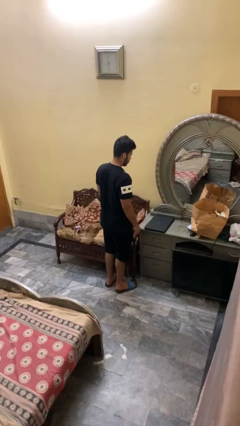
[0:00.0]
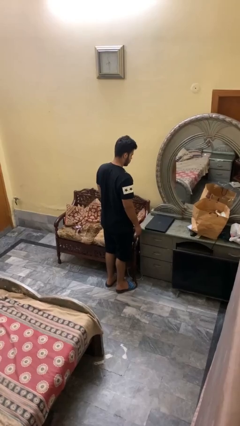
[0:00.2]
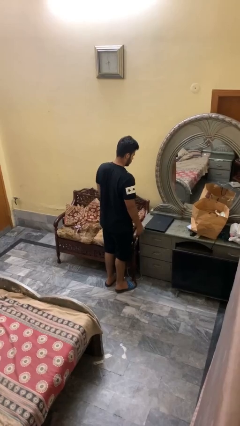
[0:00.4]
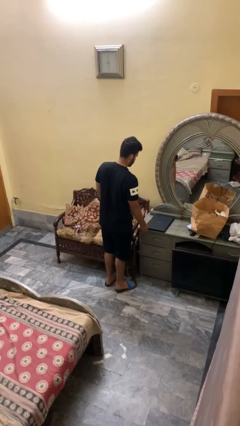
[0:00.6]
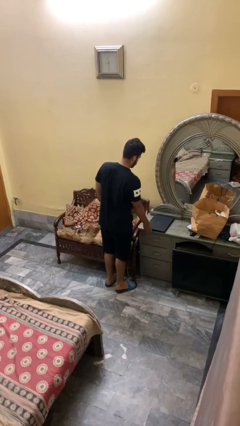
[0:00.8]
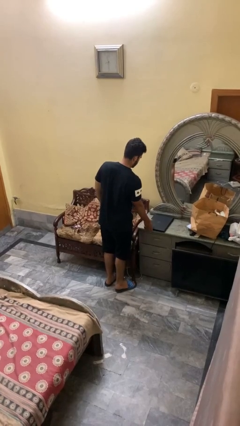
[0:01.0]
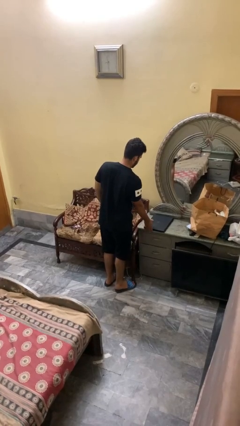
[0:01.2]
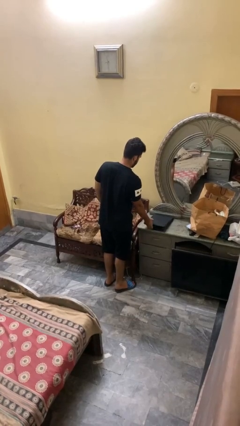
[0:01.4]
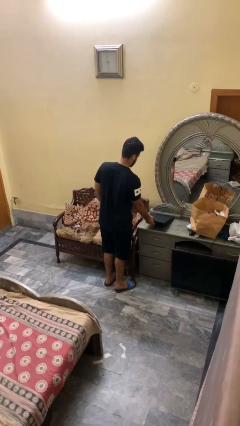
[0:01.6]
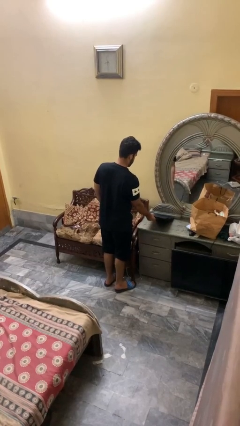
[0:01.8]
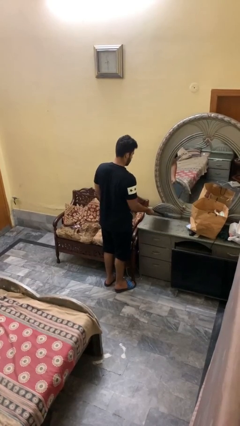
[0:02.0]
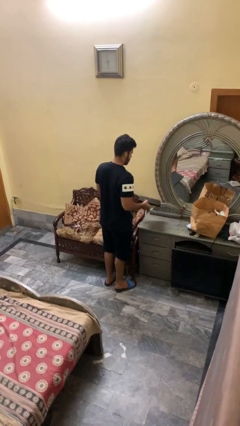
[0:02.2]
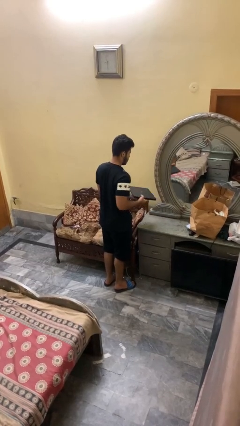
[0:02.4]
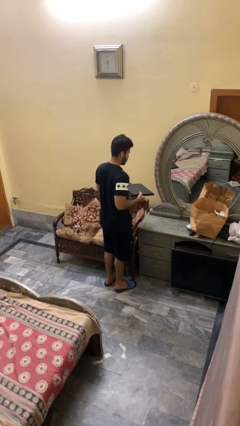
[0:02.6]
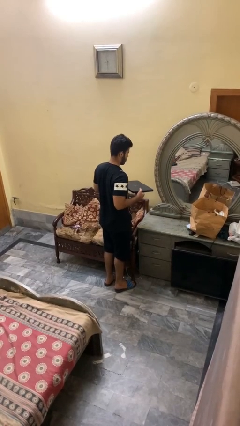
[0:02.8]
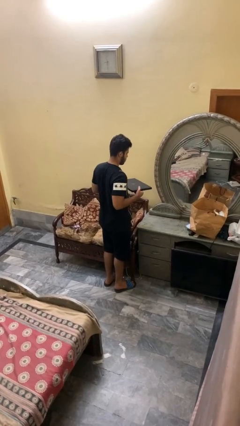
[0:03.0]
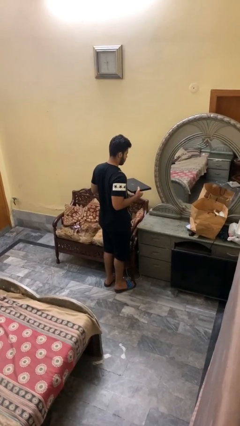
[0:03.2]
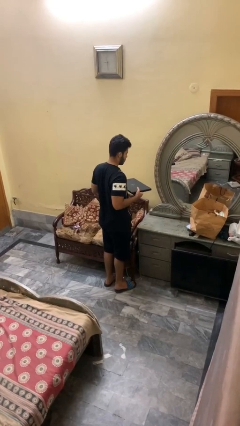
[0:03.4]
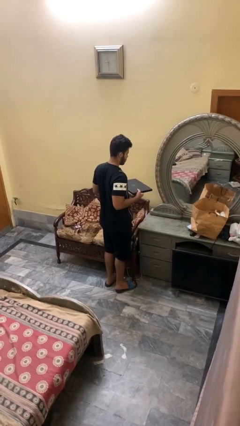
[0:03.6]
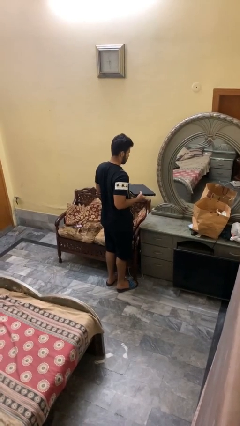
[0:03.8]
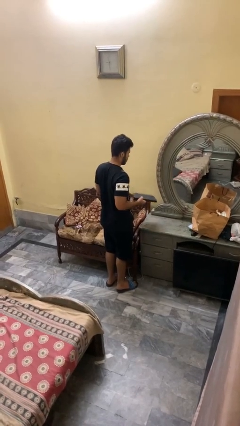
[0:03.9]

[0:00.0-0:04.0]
person picks up object from countertop

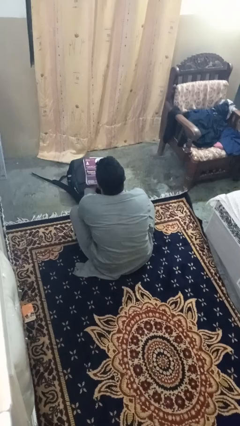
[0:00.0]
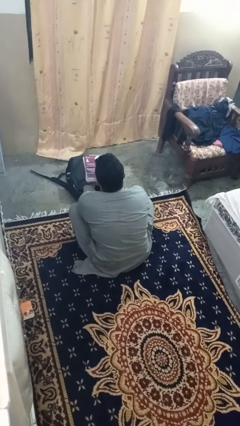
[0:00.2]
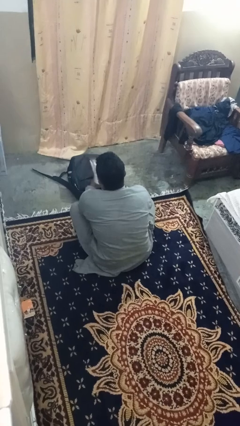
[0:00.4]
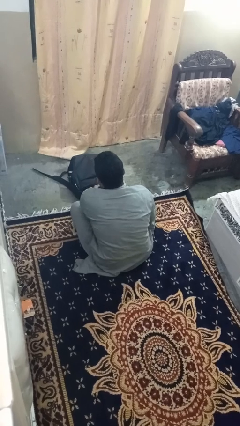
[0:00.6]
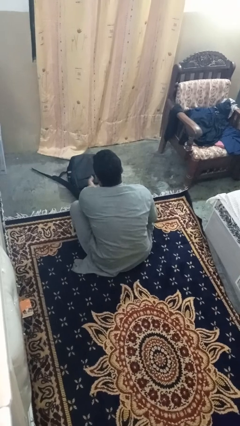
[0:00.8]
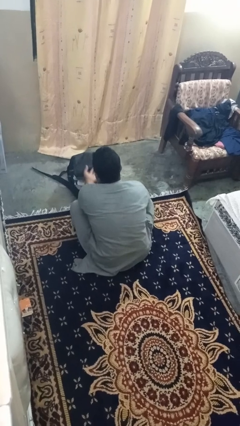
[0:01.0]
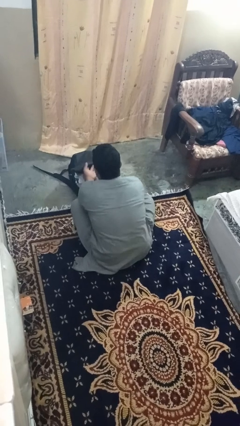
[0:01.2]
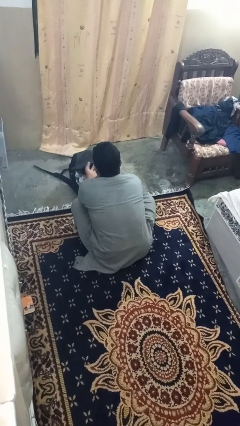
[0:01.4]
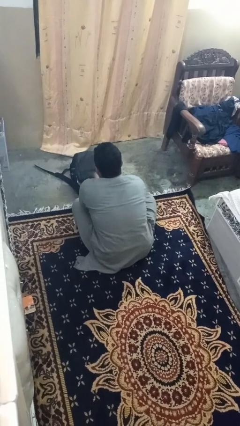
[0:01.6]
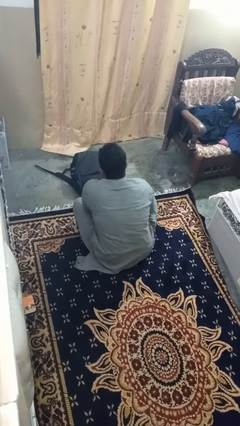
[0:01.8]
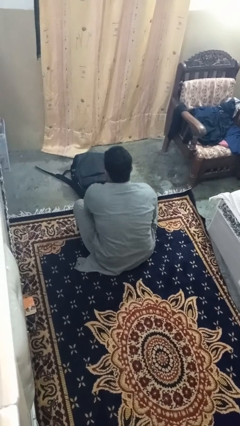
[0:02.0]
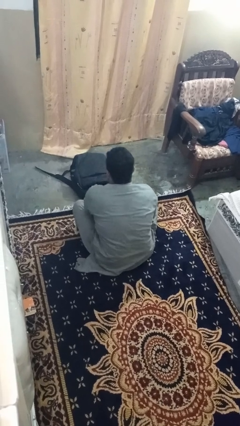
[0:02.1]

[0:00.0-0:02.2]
person puts object into bag

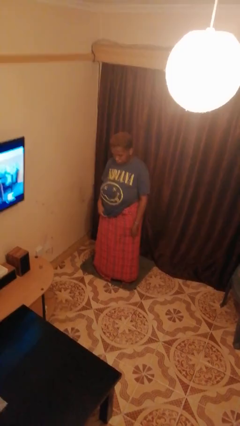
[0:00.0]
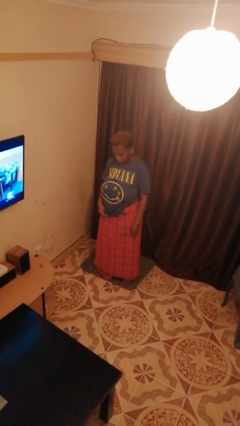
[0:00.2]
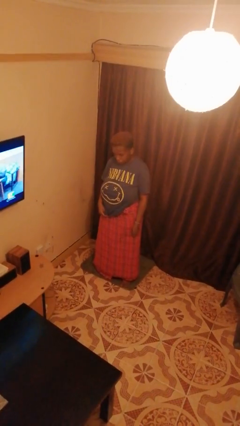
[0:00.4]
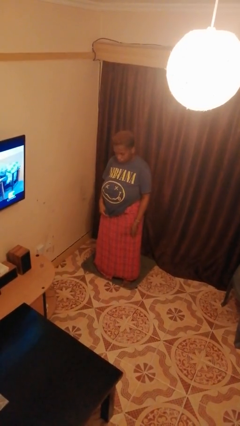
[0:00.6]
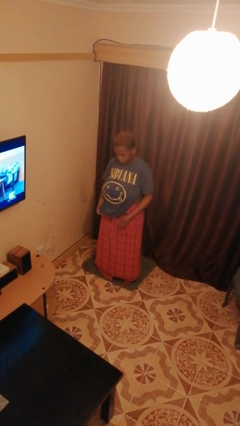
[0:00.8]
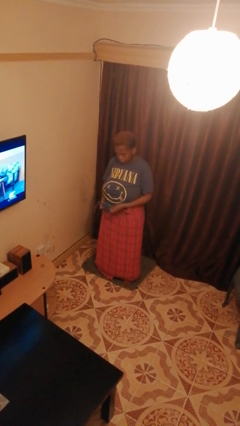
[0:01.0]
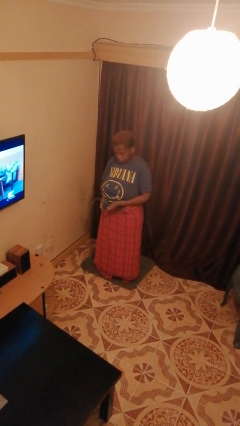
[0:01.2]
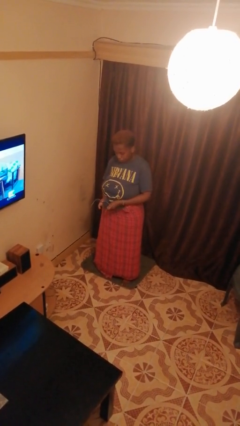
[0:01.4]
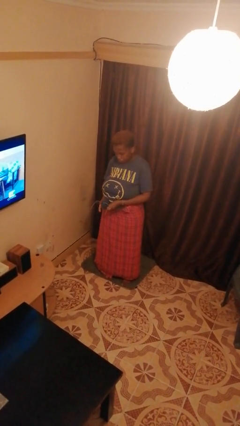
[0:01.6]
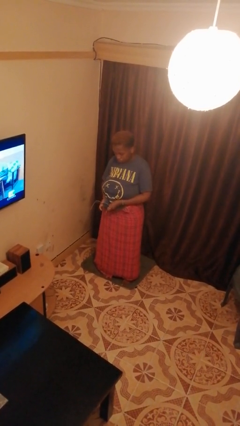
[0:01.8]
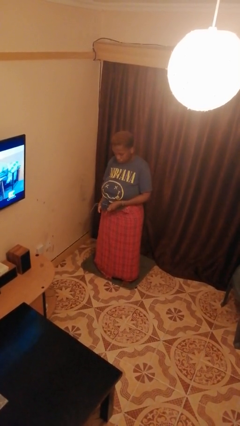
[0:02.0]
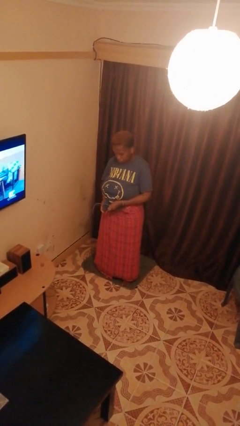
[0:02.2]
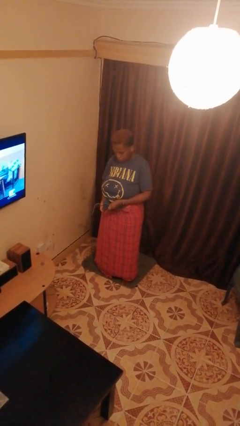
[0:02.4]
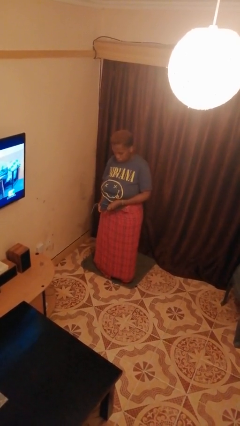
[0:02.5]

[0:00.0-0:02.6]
person cleans eyeglasses

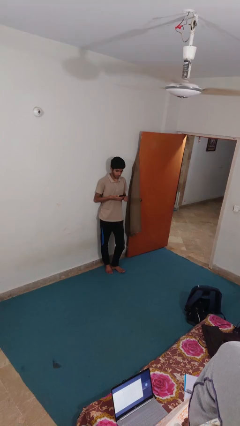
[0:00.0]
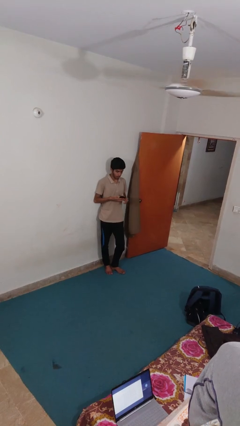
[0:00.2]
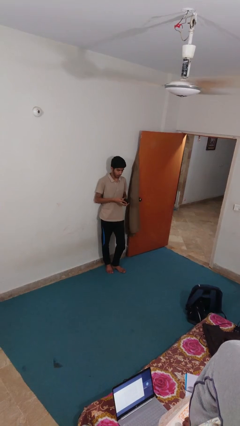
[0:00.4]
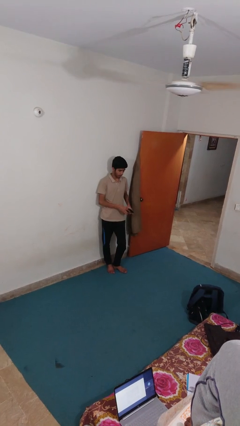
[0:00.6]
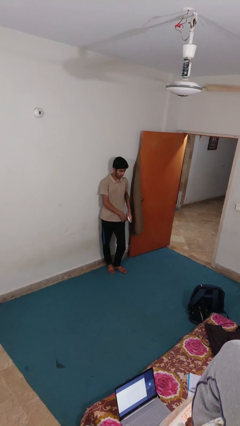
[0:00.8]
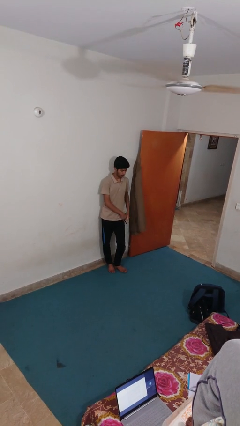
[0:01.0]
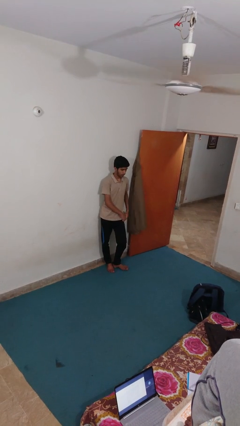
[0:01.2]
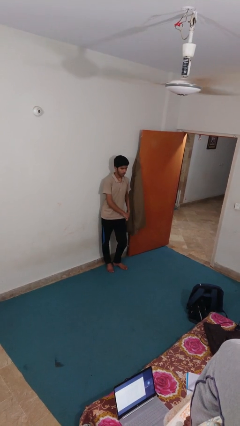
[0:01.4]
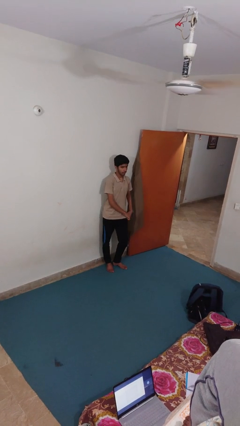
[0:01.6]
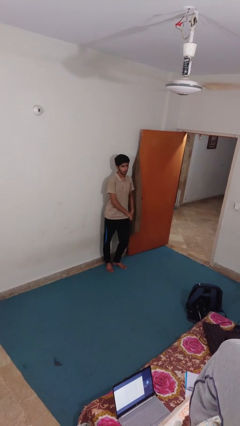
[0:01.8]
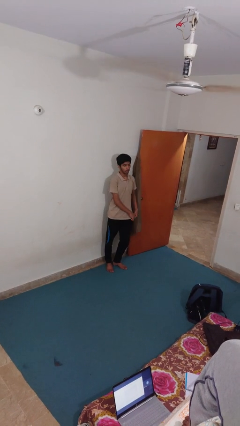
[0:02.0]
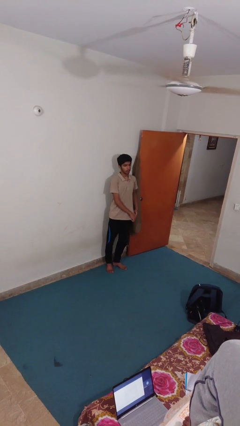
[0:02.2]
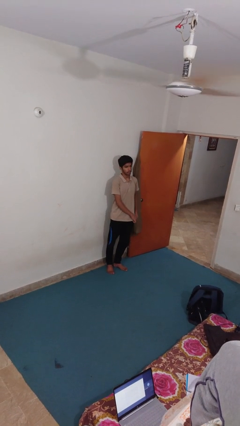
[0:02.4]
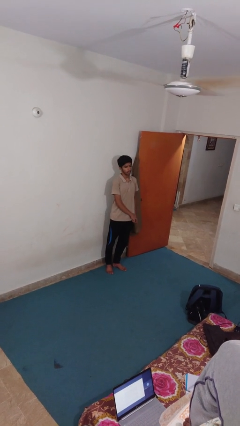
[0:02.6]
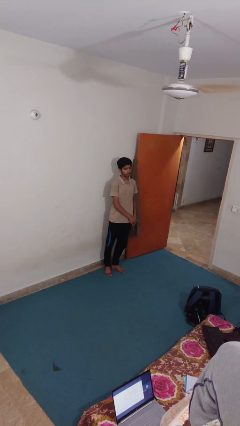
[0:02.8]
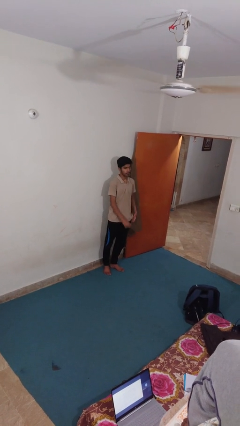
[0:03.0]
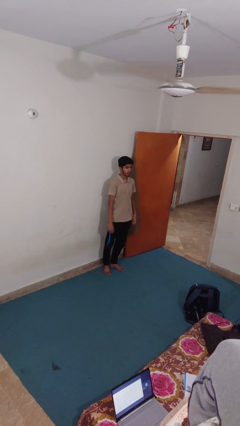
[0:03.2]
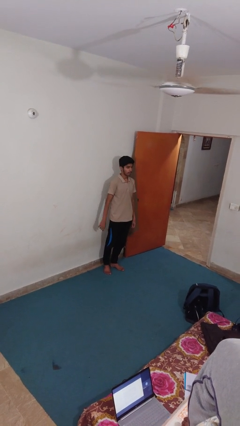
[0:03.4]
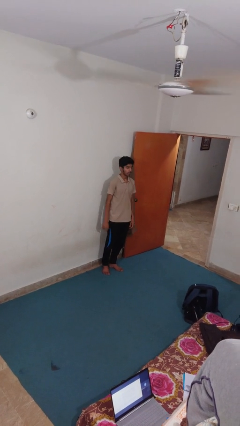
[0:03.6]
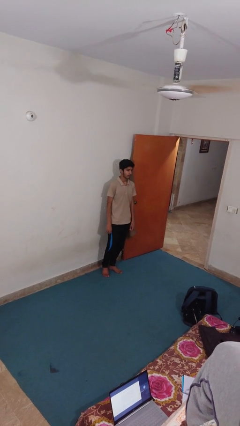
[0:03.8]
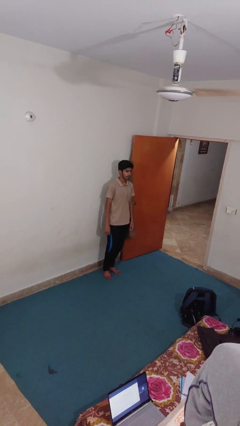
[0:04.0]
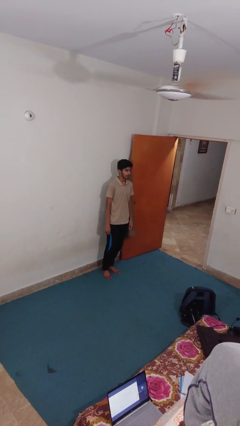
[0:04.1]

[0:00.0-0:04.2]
person puts phone into pocket

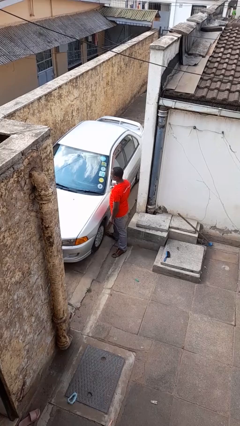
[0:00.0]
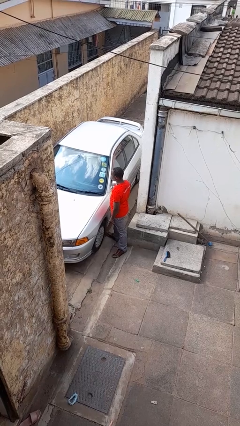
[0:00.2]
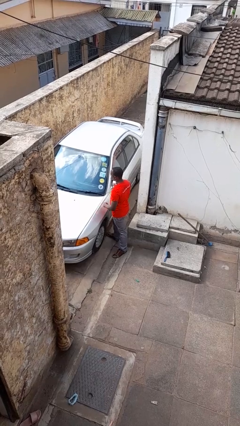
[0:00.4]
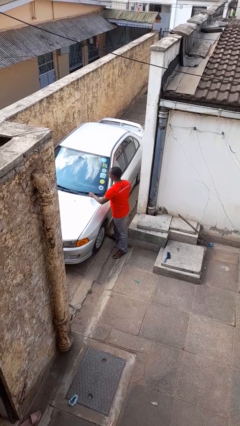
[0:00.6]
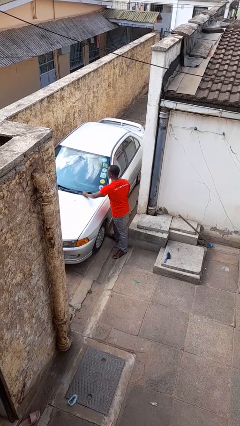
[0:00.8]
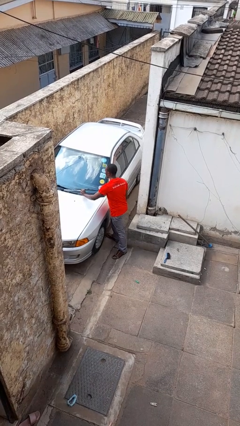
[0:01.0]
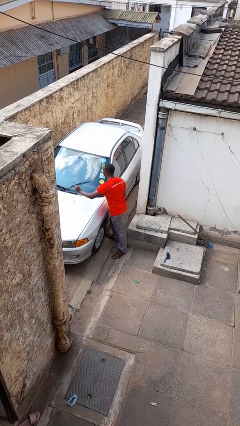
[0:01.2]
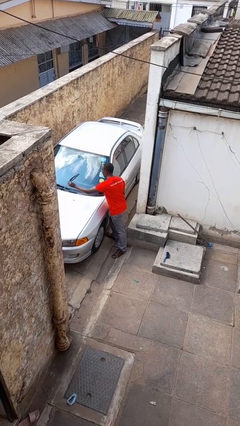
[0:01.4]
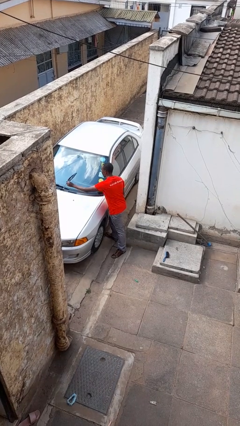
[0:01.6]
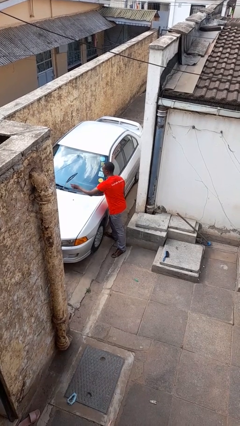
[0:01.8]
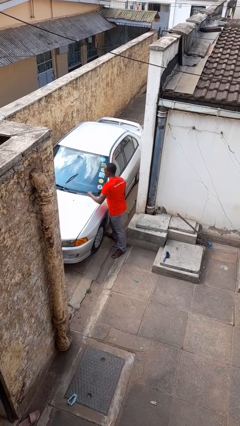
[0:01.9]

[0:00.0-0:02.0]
person flips up car wipers

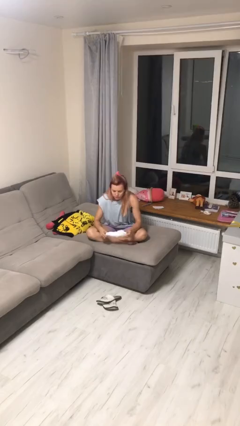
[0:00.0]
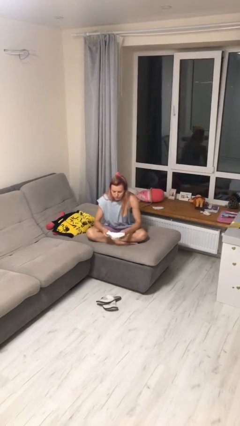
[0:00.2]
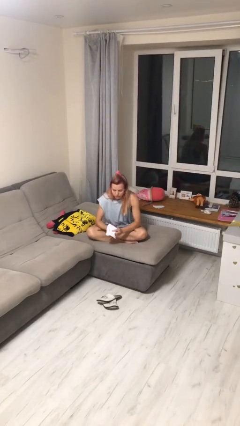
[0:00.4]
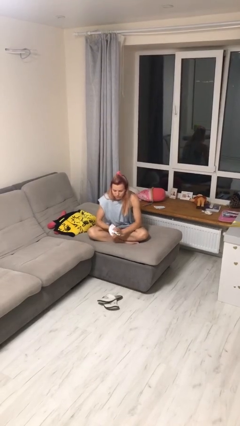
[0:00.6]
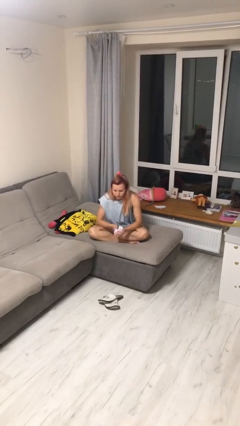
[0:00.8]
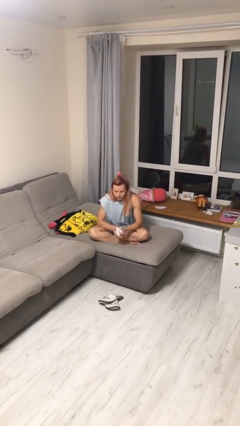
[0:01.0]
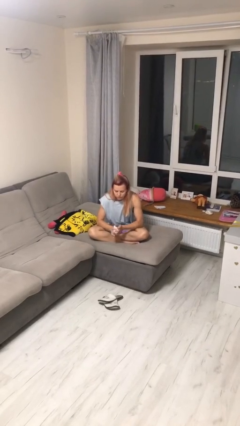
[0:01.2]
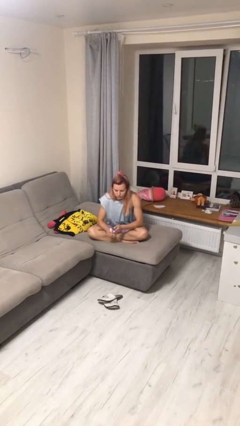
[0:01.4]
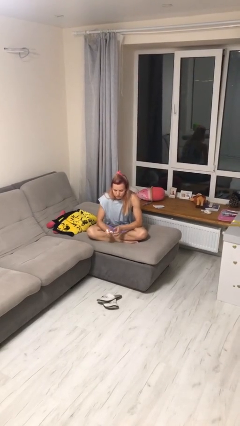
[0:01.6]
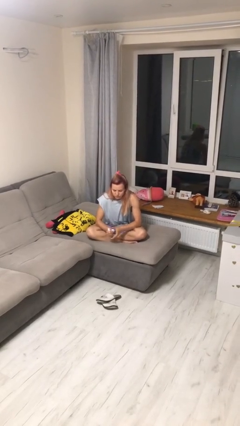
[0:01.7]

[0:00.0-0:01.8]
person crumples paper

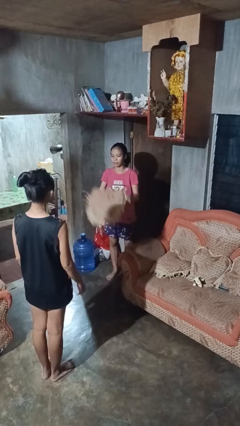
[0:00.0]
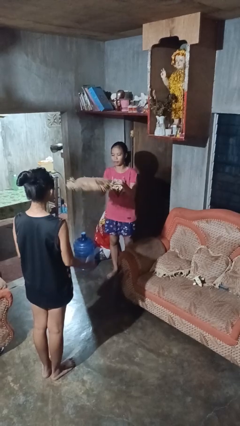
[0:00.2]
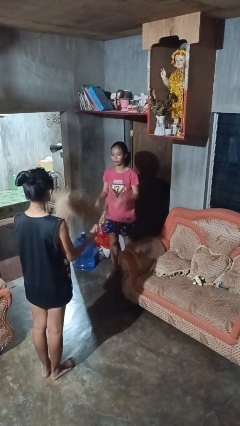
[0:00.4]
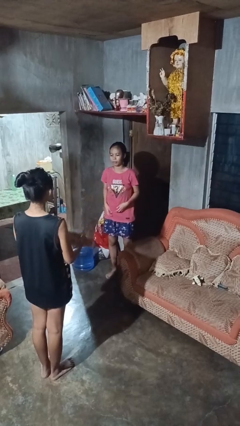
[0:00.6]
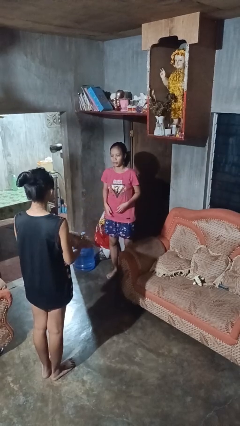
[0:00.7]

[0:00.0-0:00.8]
person throws object to person
